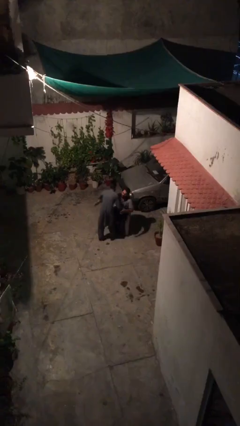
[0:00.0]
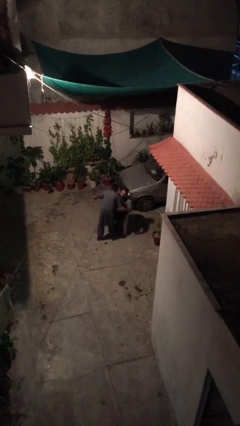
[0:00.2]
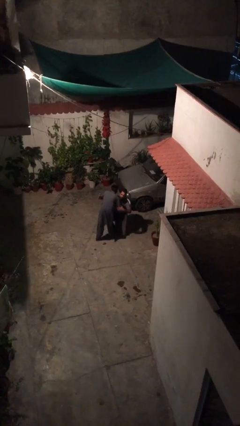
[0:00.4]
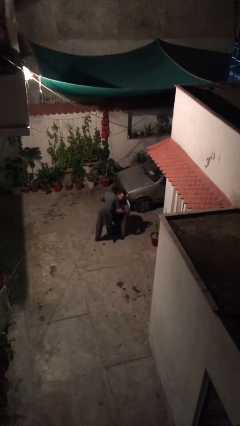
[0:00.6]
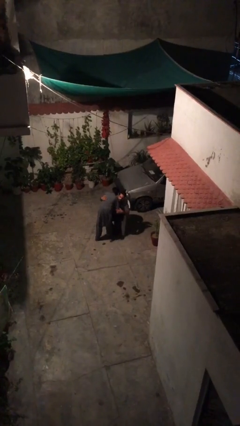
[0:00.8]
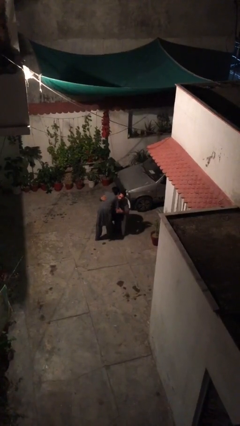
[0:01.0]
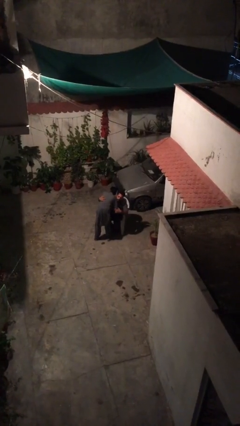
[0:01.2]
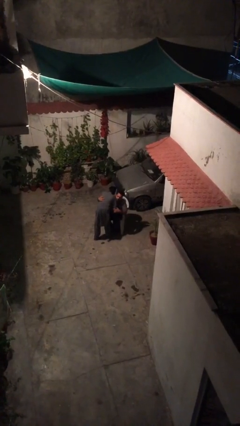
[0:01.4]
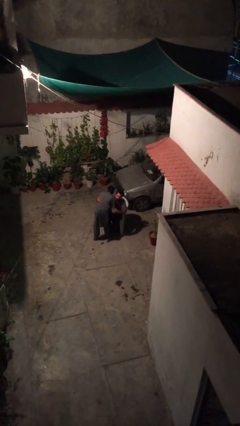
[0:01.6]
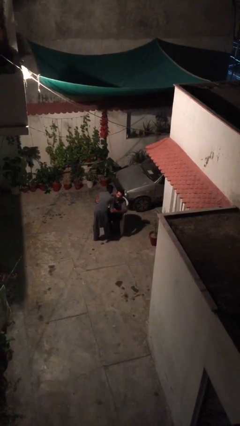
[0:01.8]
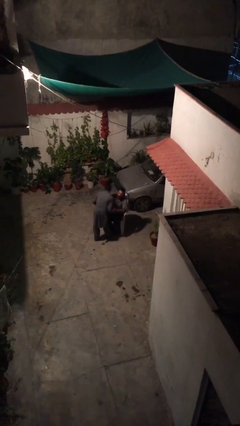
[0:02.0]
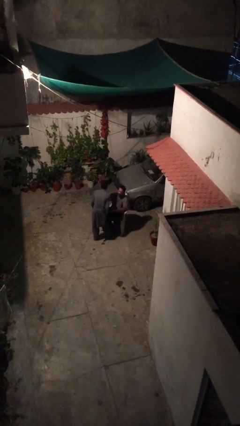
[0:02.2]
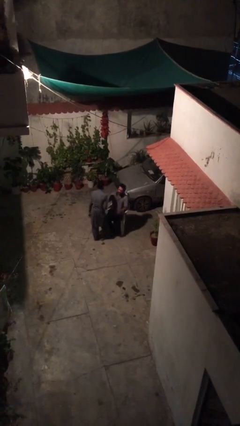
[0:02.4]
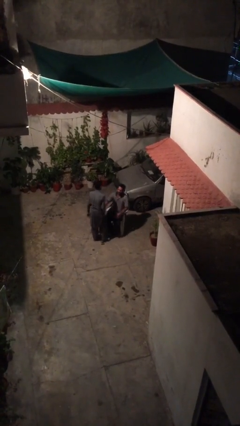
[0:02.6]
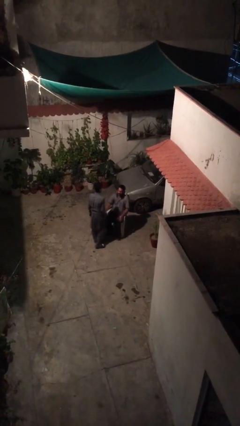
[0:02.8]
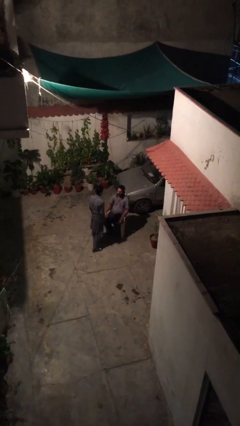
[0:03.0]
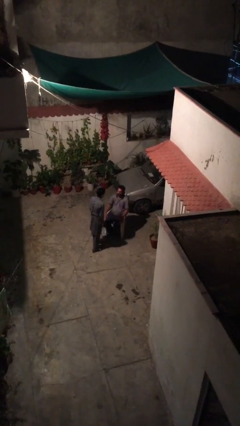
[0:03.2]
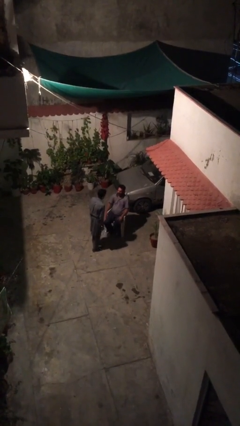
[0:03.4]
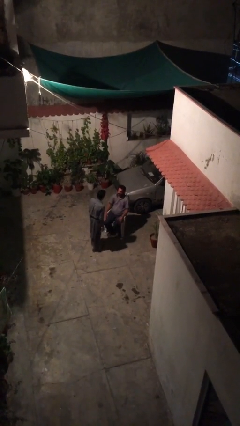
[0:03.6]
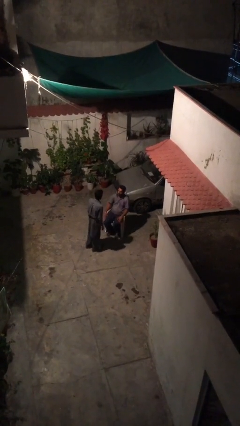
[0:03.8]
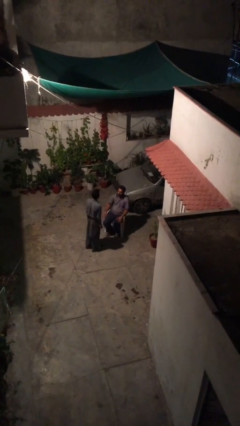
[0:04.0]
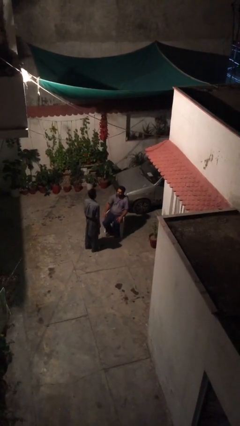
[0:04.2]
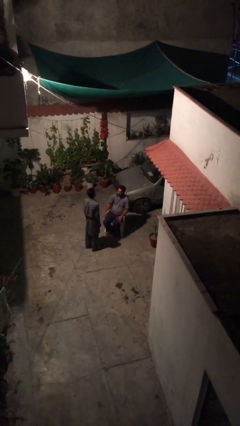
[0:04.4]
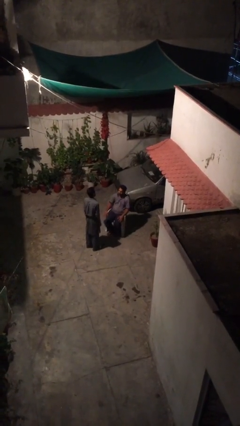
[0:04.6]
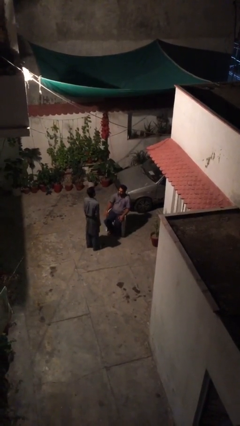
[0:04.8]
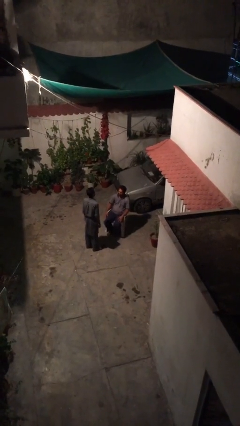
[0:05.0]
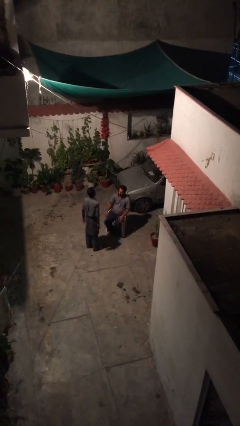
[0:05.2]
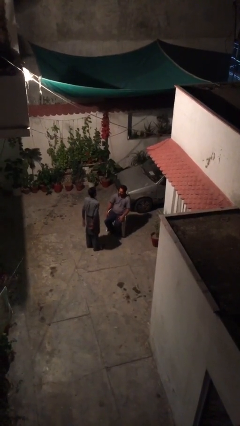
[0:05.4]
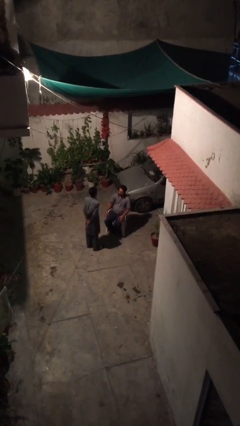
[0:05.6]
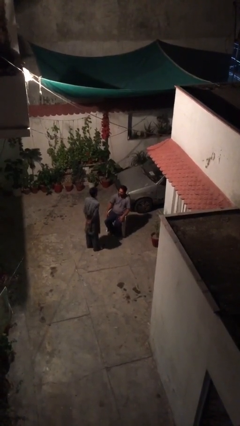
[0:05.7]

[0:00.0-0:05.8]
person embraces person

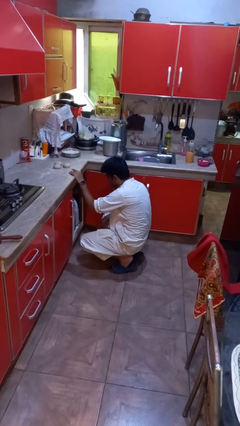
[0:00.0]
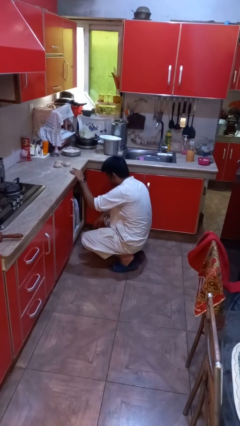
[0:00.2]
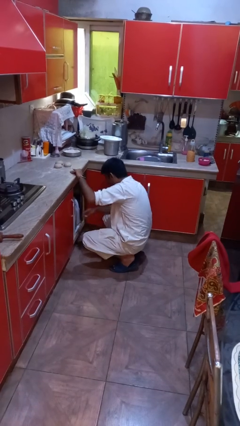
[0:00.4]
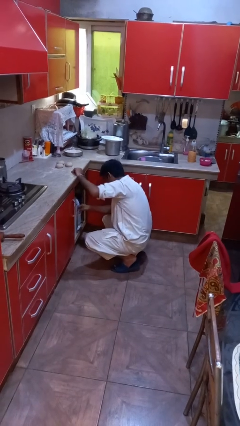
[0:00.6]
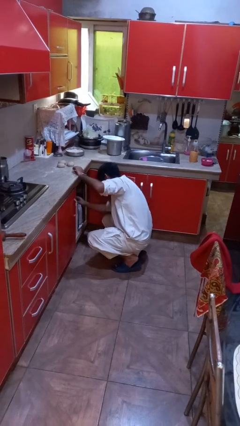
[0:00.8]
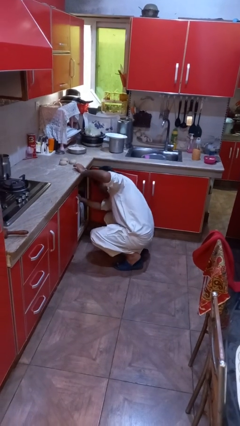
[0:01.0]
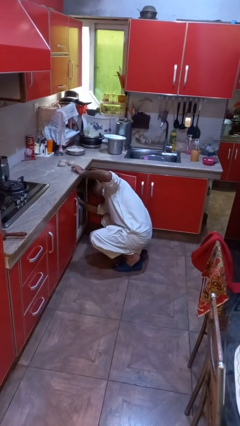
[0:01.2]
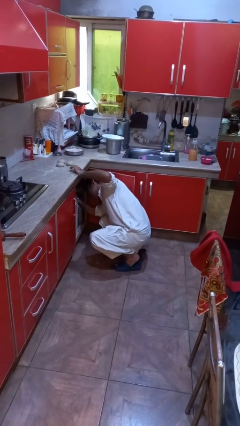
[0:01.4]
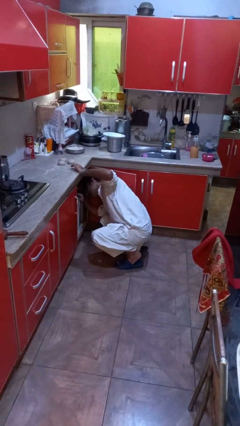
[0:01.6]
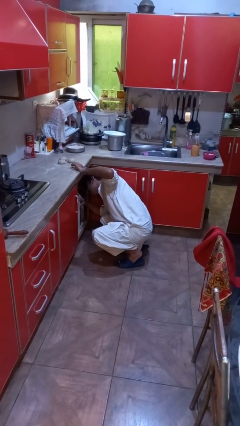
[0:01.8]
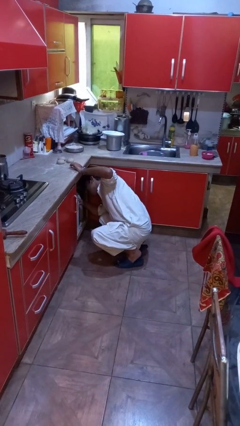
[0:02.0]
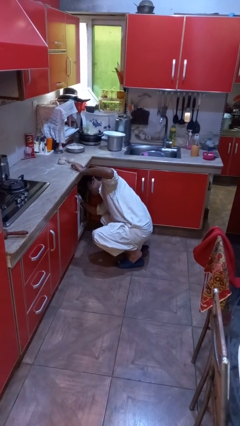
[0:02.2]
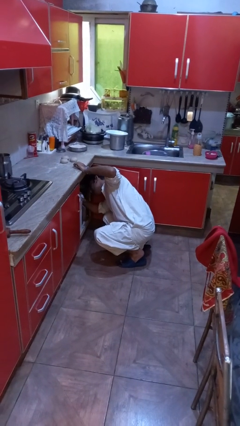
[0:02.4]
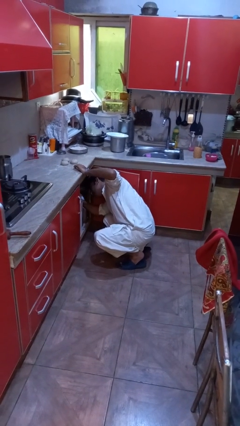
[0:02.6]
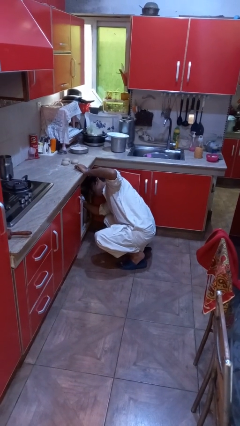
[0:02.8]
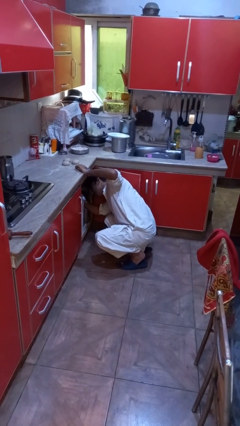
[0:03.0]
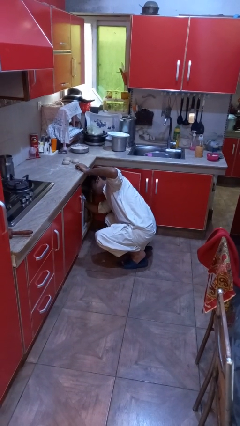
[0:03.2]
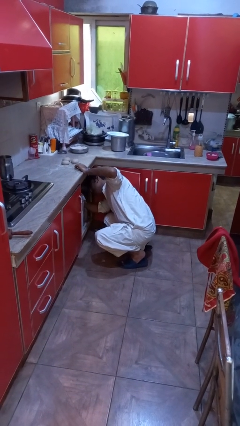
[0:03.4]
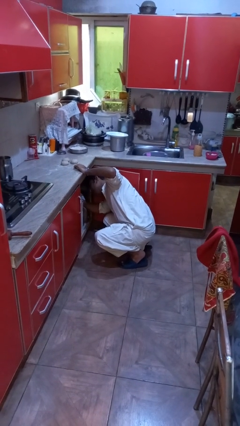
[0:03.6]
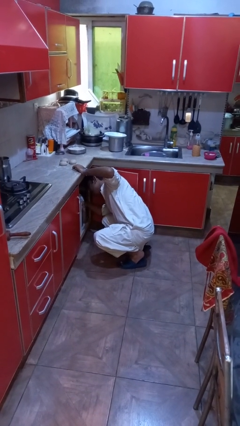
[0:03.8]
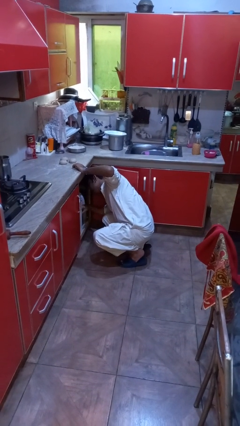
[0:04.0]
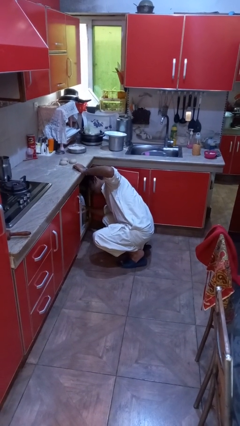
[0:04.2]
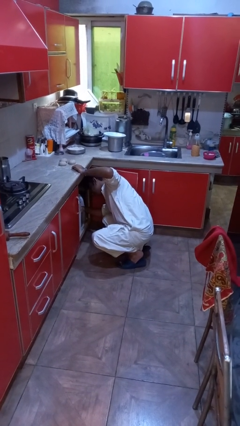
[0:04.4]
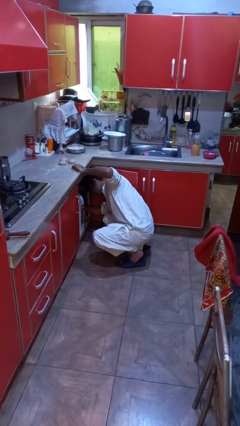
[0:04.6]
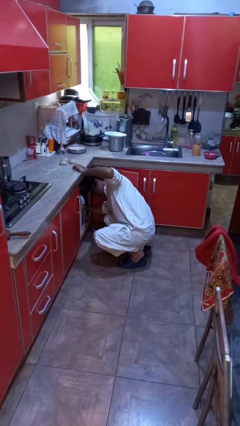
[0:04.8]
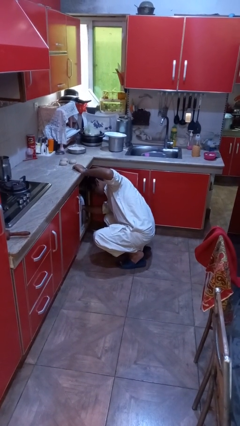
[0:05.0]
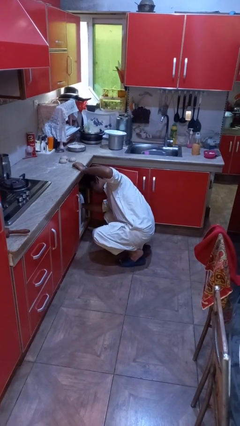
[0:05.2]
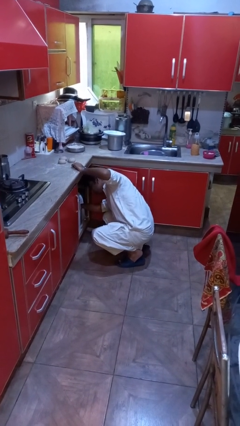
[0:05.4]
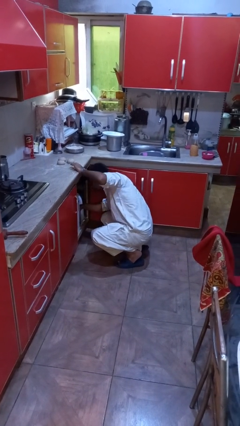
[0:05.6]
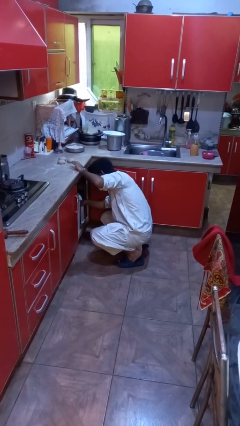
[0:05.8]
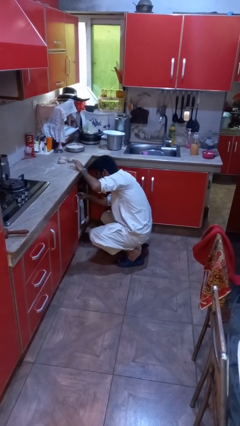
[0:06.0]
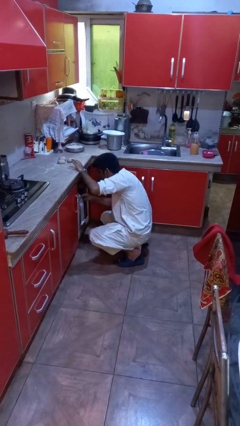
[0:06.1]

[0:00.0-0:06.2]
person searches in cabinet

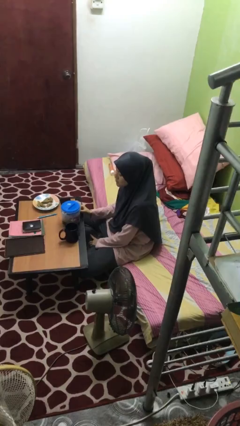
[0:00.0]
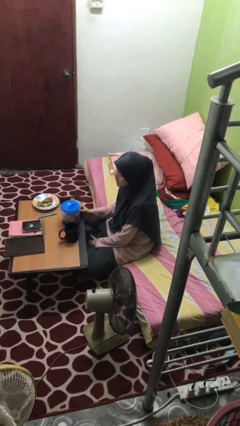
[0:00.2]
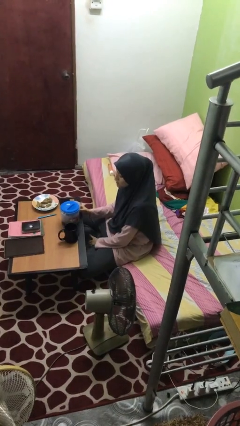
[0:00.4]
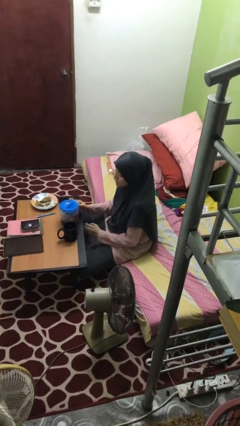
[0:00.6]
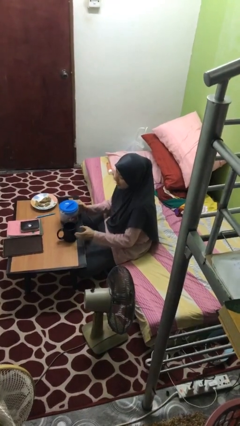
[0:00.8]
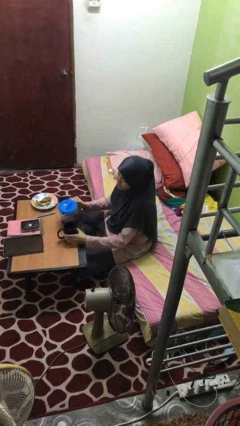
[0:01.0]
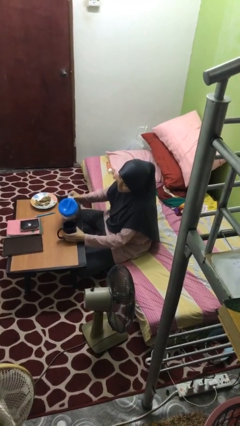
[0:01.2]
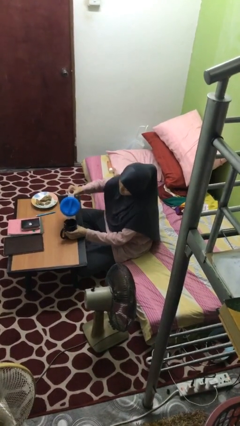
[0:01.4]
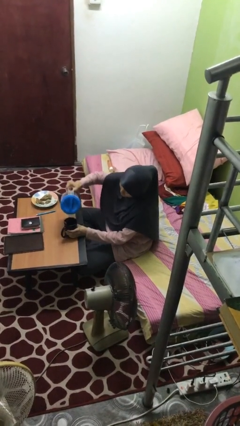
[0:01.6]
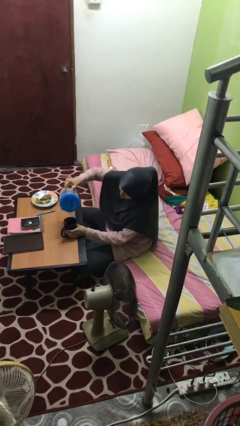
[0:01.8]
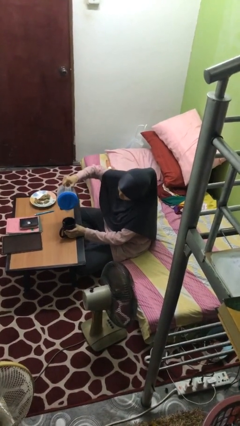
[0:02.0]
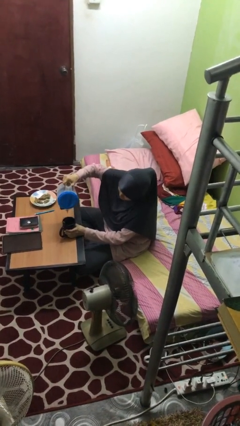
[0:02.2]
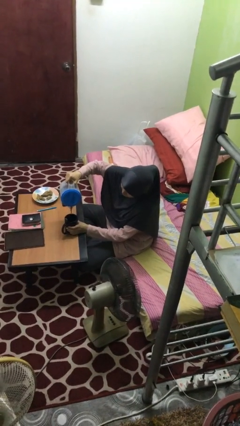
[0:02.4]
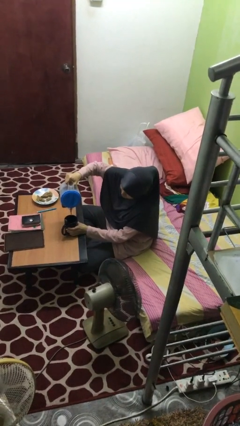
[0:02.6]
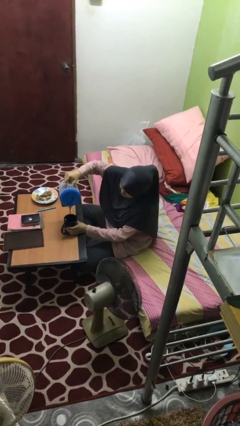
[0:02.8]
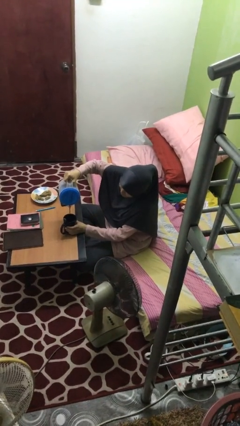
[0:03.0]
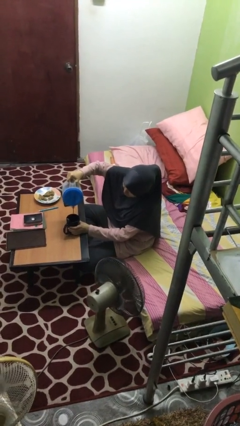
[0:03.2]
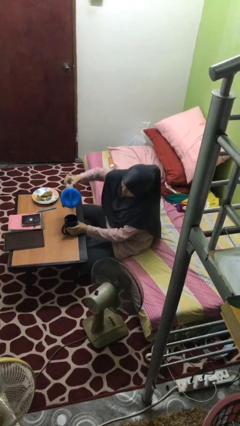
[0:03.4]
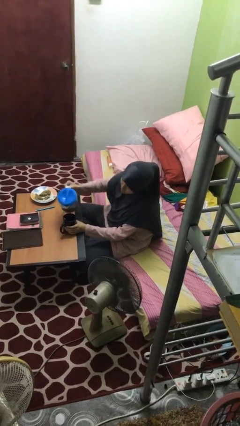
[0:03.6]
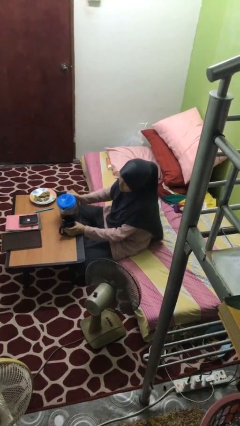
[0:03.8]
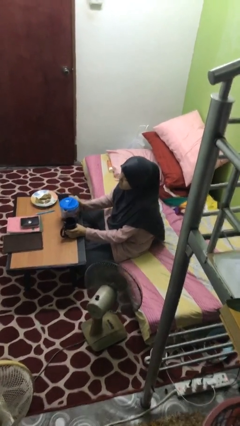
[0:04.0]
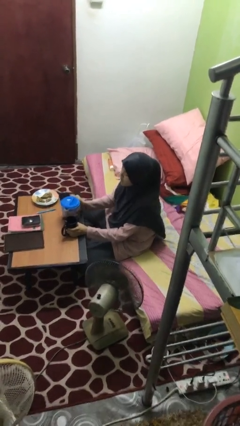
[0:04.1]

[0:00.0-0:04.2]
person pours coffee into mug

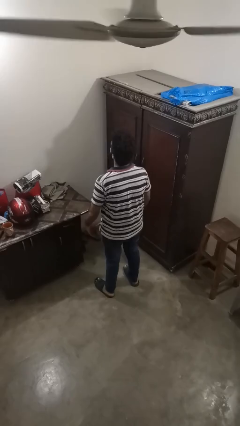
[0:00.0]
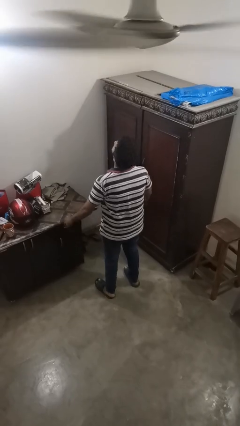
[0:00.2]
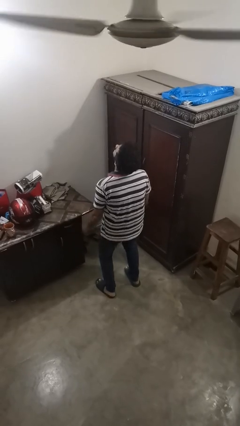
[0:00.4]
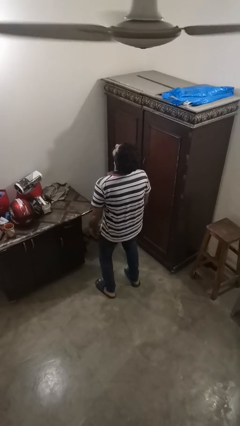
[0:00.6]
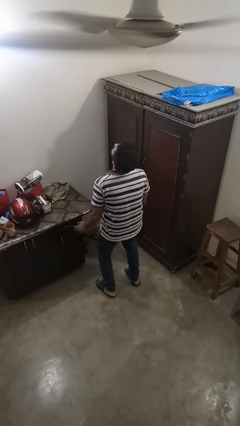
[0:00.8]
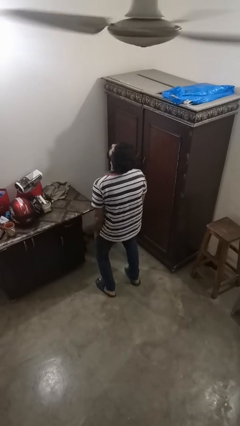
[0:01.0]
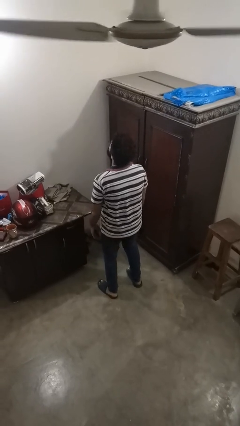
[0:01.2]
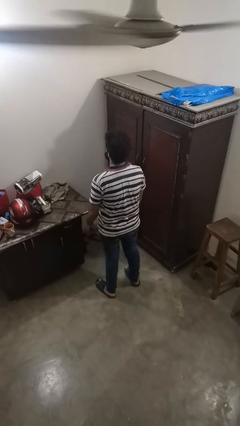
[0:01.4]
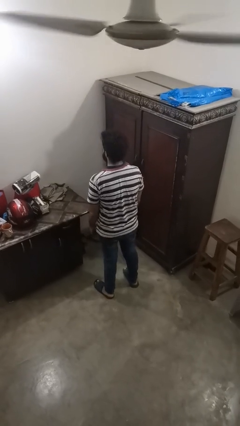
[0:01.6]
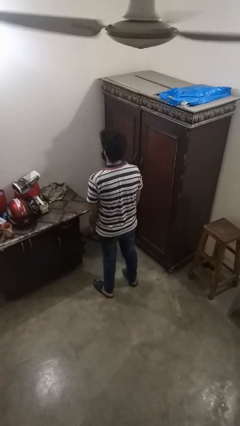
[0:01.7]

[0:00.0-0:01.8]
person slaps hands on thighs
